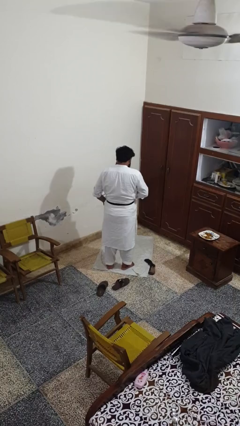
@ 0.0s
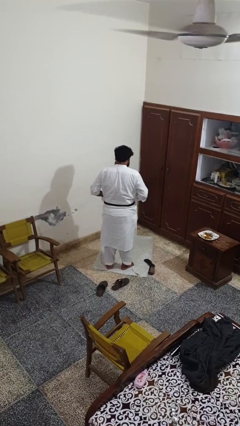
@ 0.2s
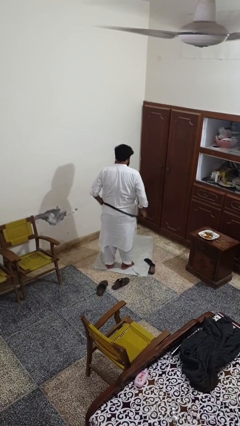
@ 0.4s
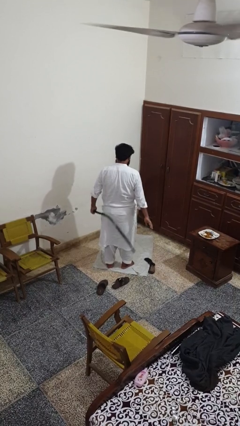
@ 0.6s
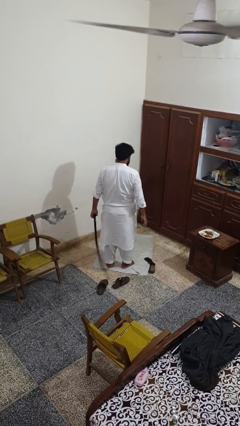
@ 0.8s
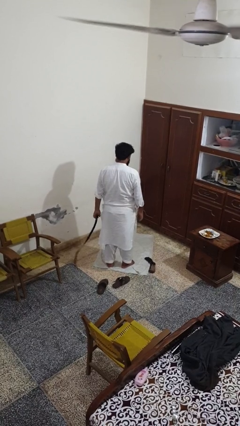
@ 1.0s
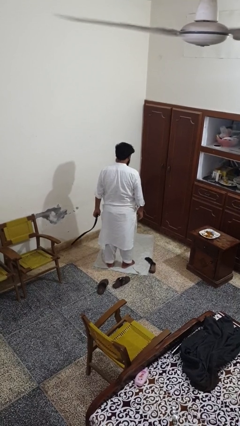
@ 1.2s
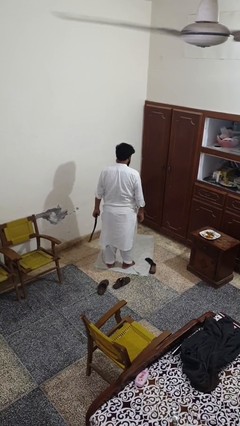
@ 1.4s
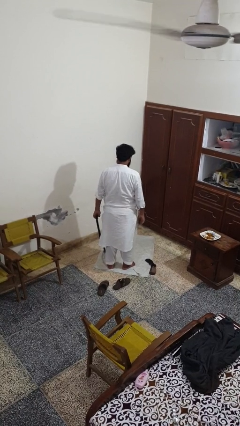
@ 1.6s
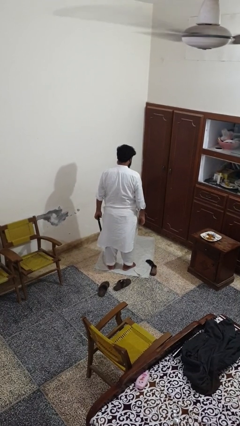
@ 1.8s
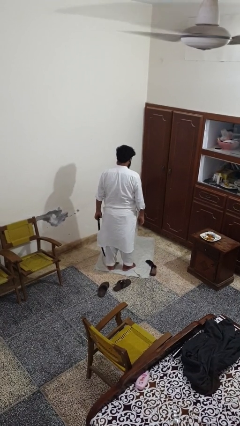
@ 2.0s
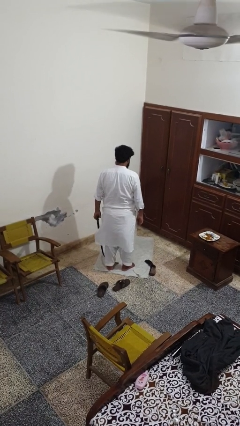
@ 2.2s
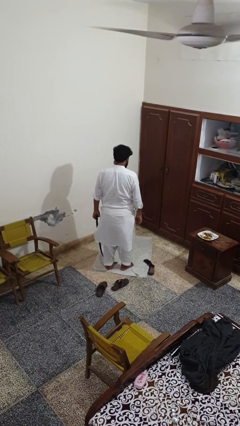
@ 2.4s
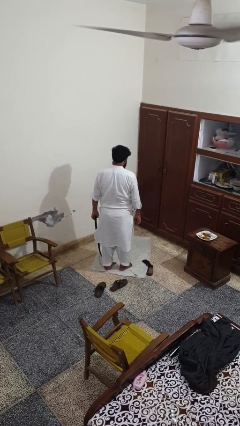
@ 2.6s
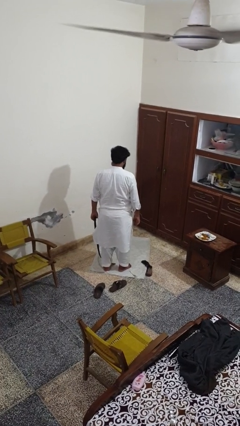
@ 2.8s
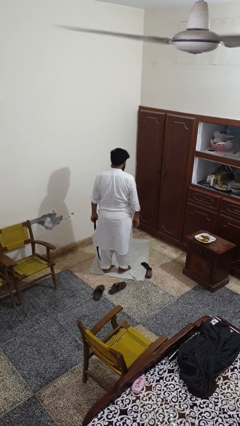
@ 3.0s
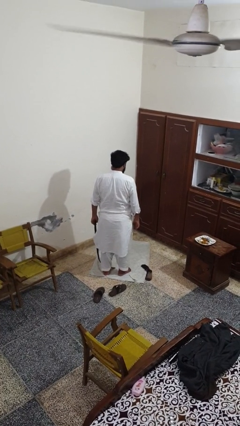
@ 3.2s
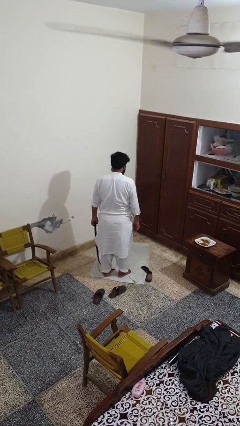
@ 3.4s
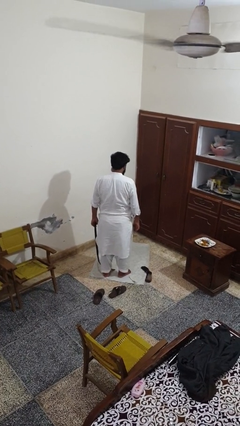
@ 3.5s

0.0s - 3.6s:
person takes off belt

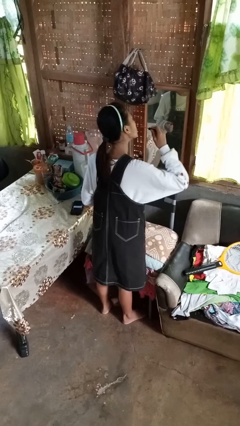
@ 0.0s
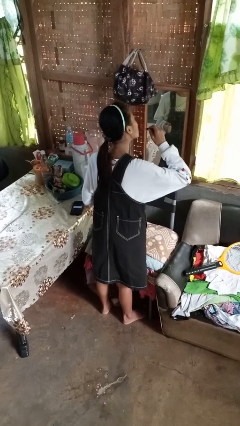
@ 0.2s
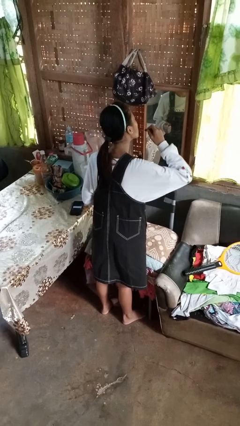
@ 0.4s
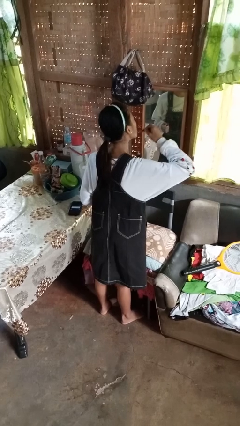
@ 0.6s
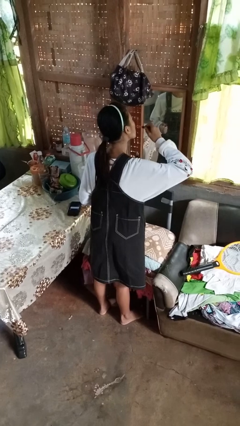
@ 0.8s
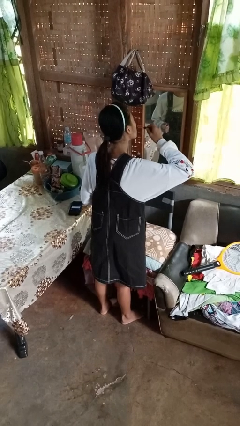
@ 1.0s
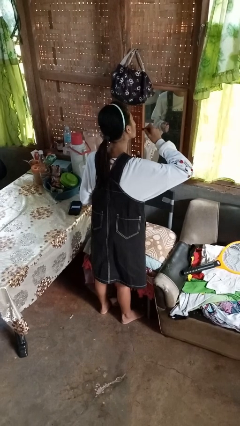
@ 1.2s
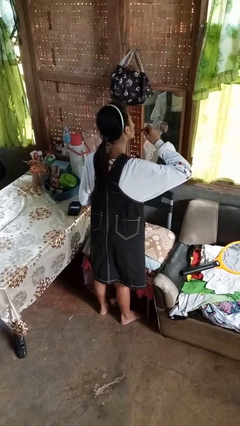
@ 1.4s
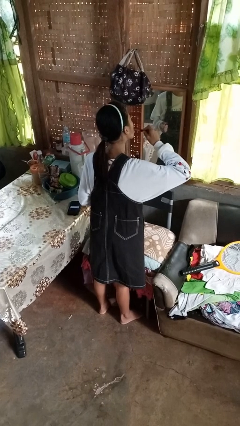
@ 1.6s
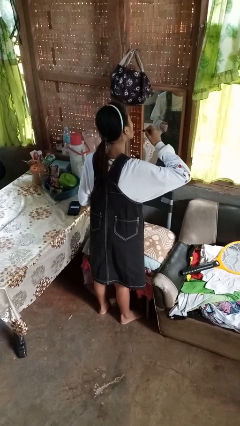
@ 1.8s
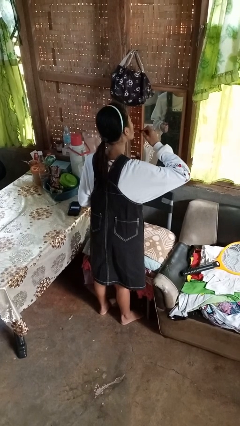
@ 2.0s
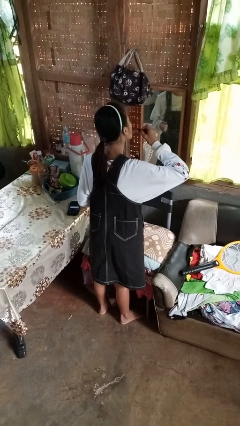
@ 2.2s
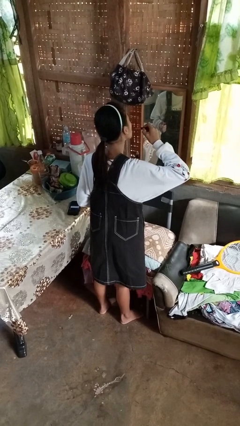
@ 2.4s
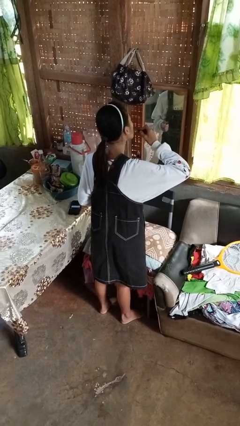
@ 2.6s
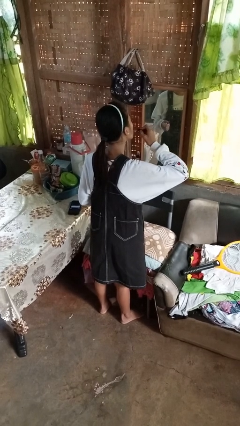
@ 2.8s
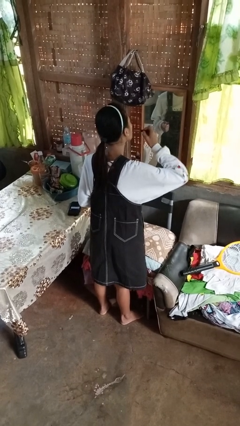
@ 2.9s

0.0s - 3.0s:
person applies lip makeup

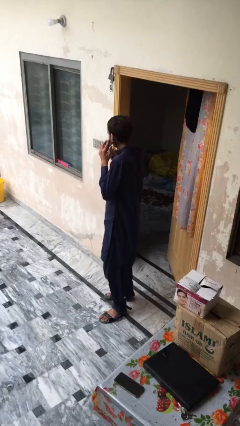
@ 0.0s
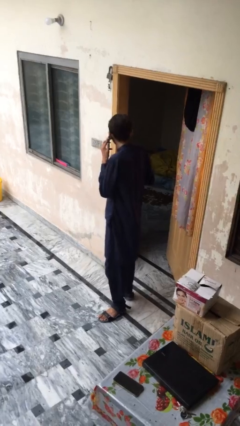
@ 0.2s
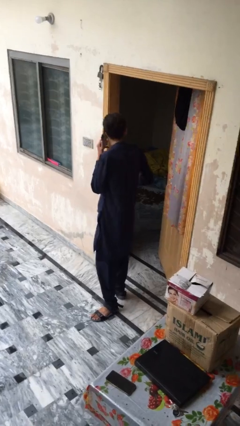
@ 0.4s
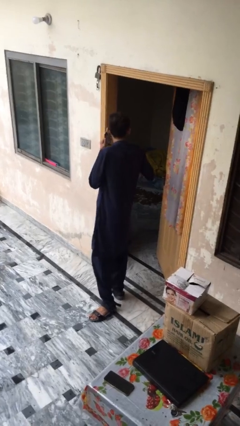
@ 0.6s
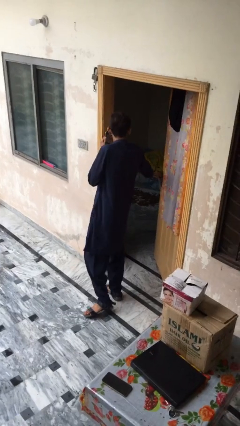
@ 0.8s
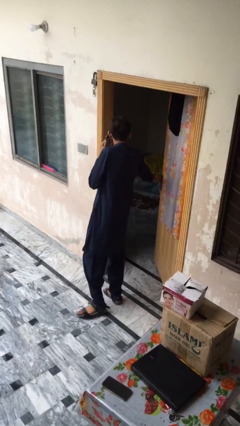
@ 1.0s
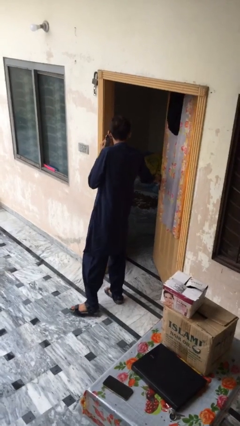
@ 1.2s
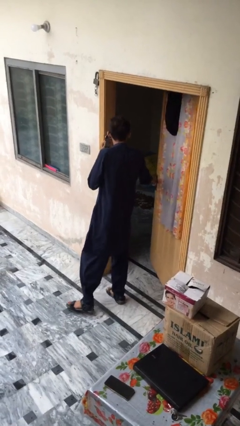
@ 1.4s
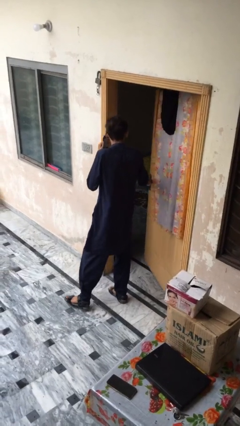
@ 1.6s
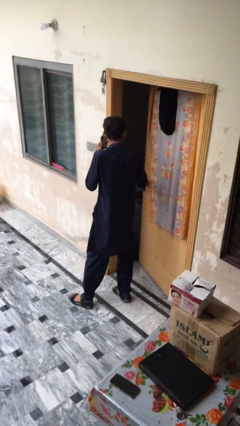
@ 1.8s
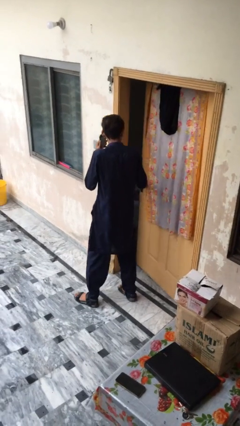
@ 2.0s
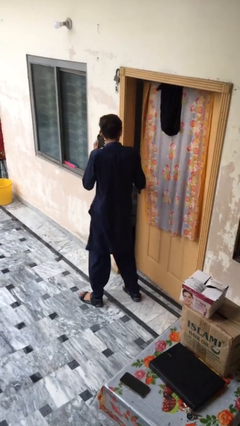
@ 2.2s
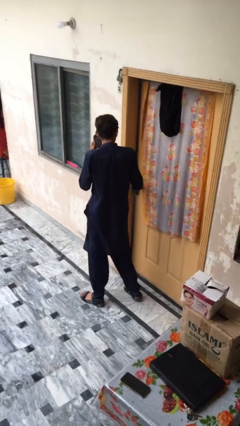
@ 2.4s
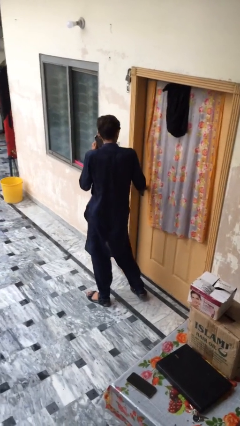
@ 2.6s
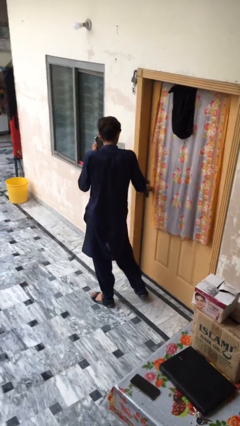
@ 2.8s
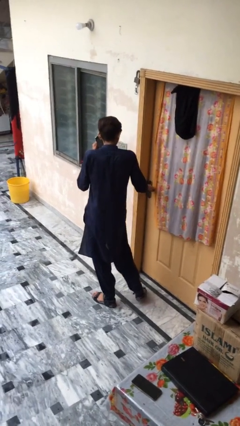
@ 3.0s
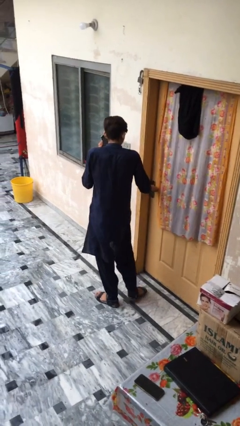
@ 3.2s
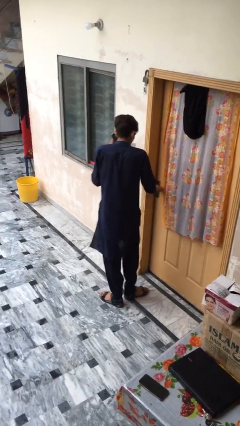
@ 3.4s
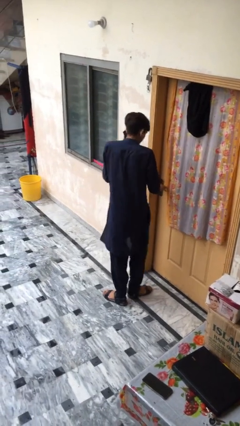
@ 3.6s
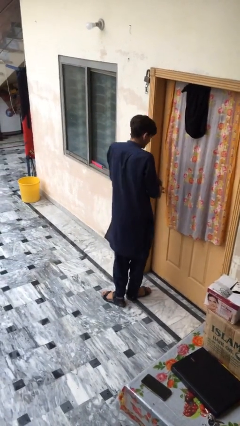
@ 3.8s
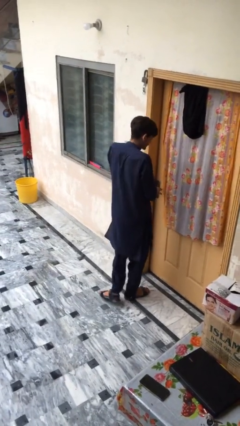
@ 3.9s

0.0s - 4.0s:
person closes facility door

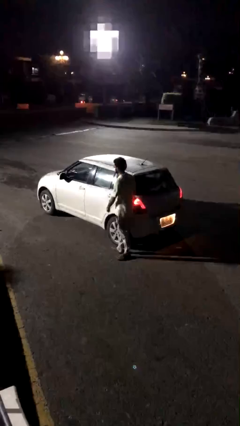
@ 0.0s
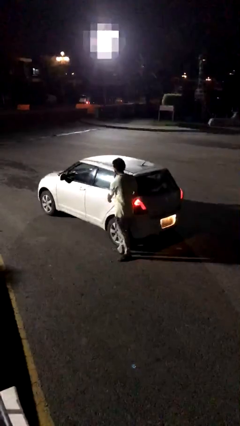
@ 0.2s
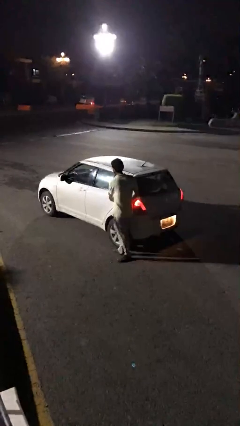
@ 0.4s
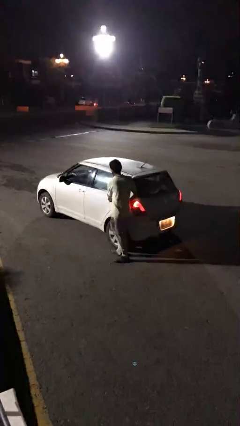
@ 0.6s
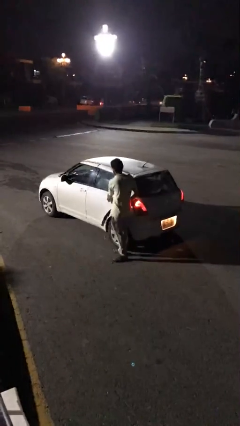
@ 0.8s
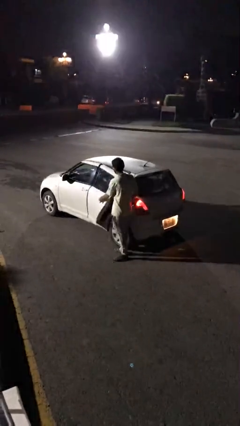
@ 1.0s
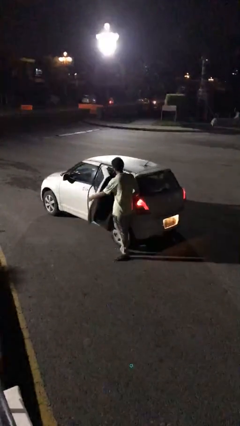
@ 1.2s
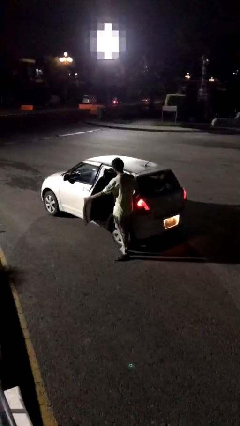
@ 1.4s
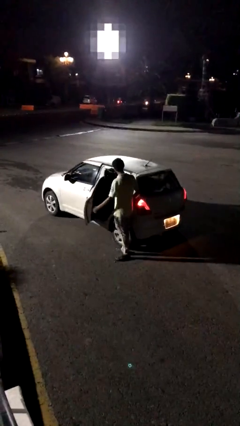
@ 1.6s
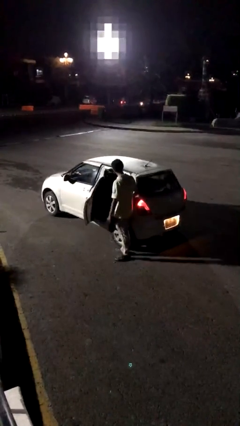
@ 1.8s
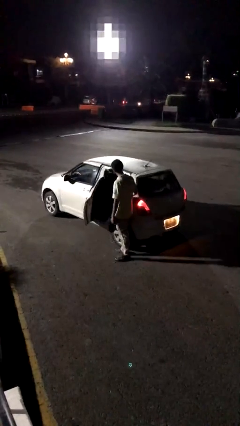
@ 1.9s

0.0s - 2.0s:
person opens car door

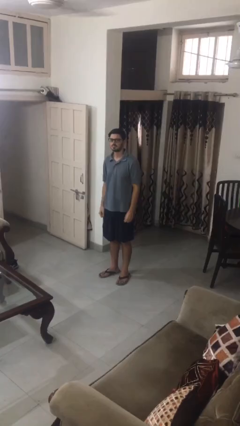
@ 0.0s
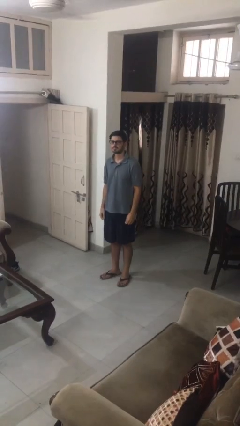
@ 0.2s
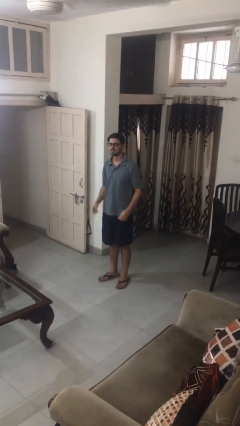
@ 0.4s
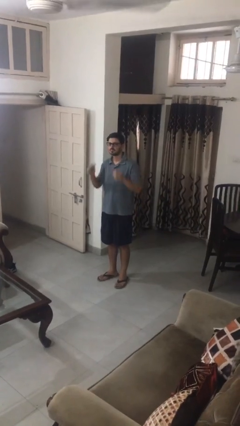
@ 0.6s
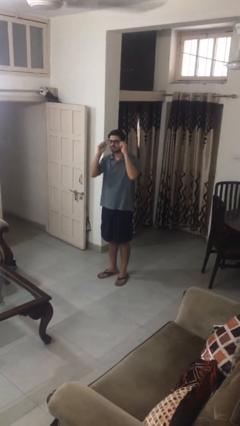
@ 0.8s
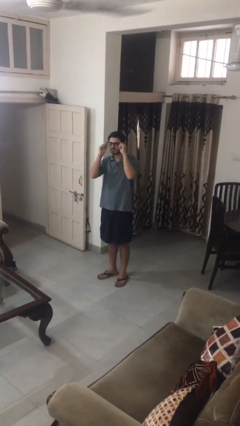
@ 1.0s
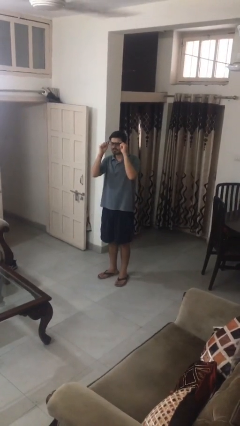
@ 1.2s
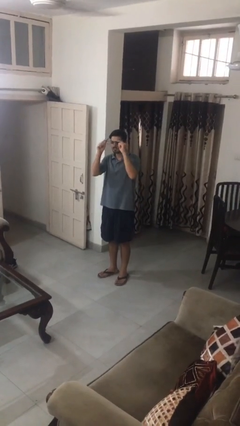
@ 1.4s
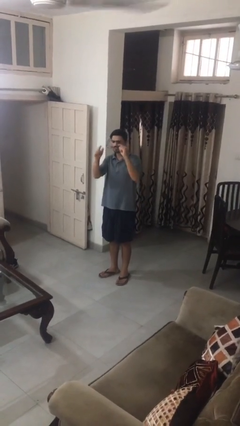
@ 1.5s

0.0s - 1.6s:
person takes off glasses

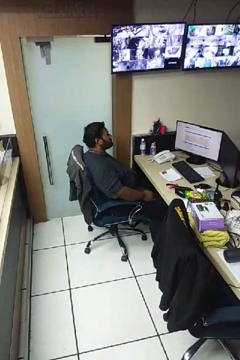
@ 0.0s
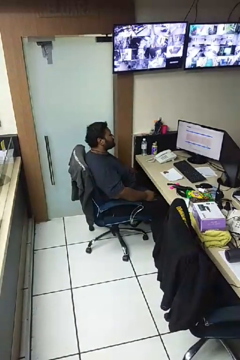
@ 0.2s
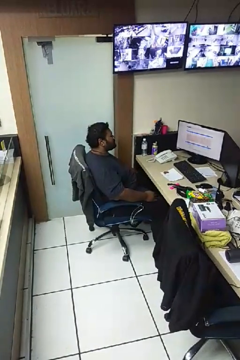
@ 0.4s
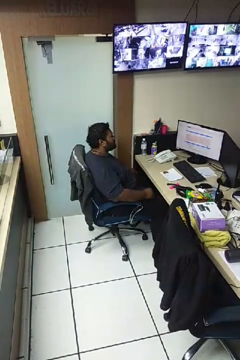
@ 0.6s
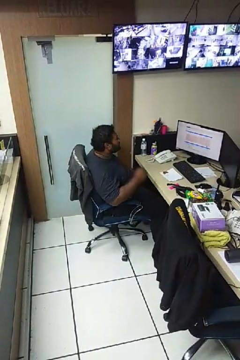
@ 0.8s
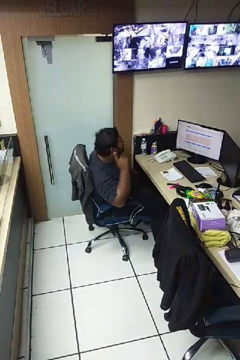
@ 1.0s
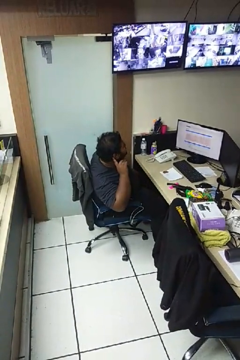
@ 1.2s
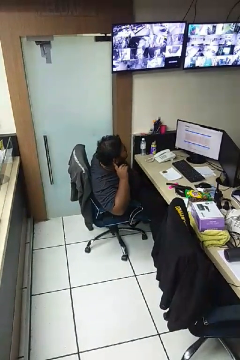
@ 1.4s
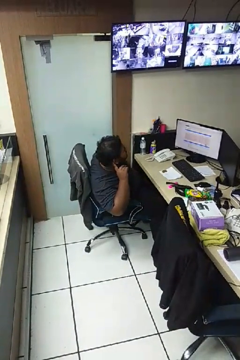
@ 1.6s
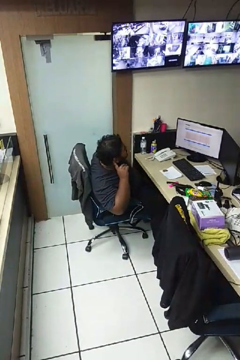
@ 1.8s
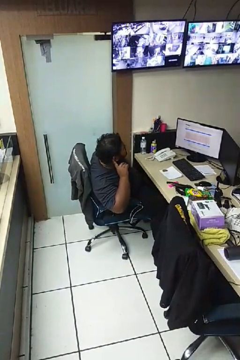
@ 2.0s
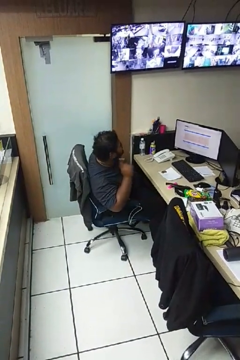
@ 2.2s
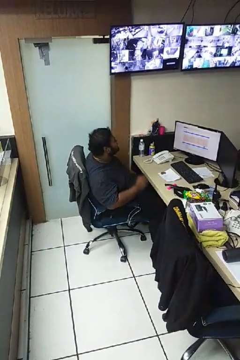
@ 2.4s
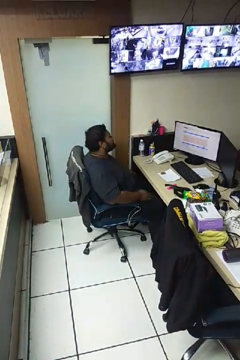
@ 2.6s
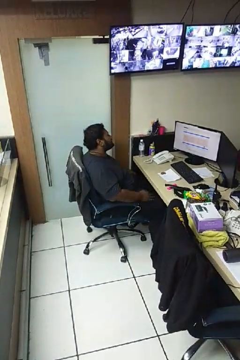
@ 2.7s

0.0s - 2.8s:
person gestures listen closely

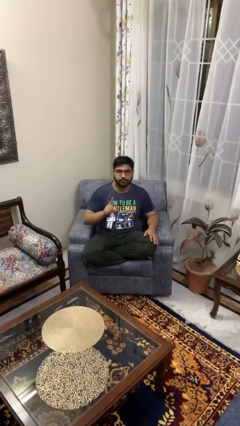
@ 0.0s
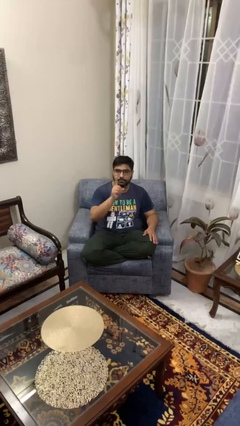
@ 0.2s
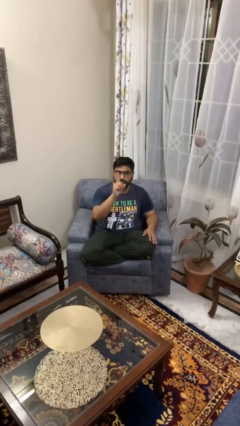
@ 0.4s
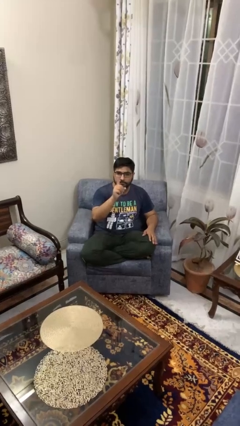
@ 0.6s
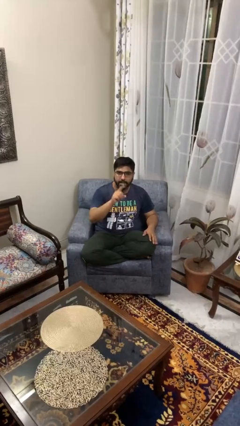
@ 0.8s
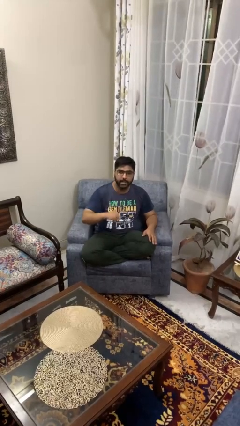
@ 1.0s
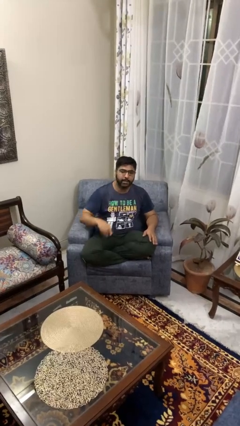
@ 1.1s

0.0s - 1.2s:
person gestures number one
